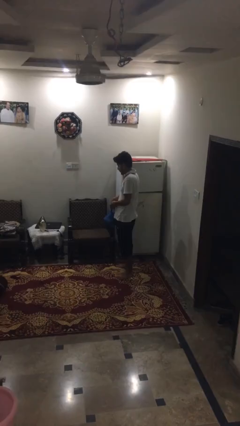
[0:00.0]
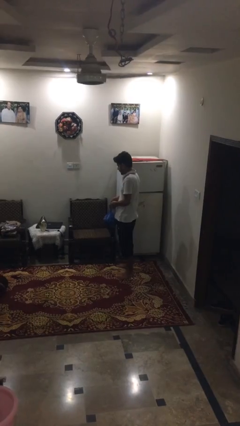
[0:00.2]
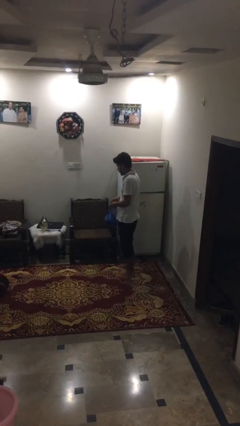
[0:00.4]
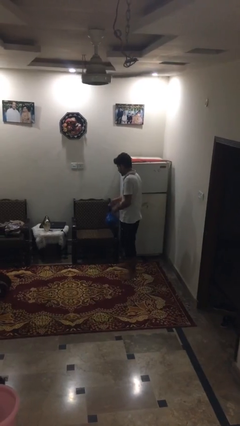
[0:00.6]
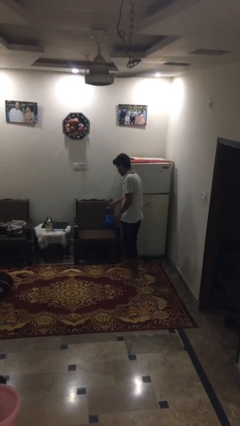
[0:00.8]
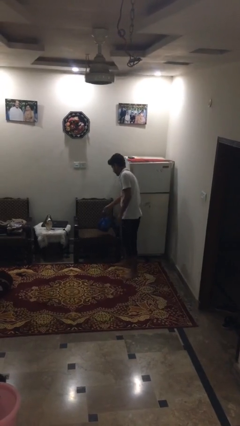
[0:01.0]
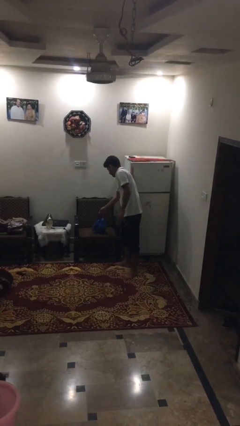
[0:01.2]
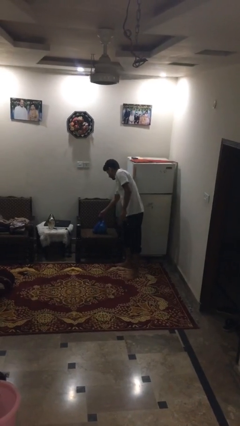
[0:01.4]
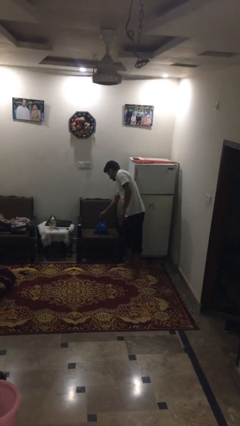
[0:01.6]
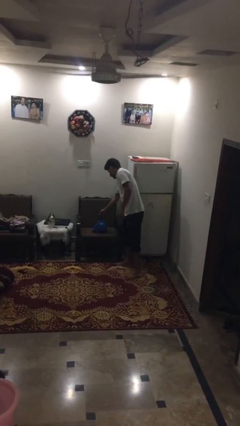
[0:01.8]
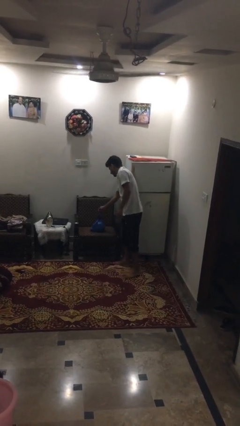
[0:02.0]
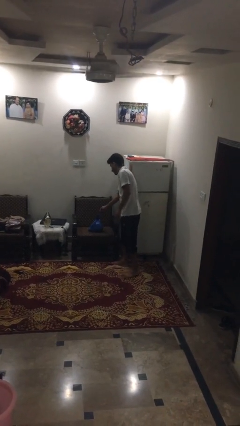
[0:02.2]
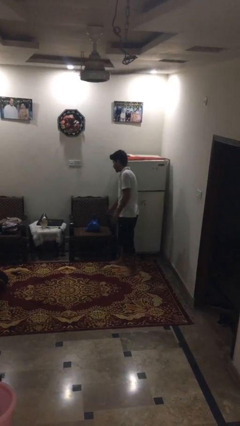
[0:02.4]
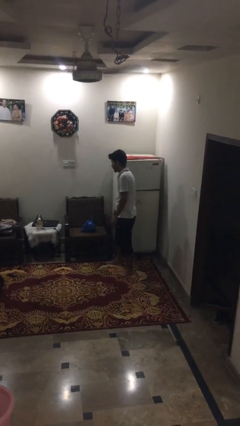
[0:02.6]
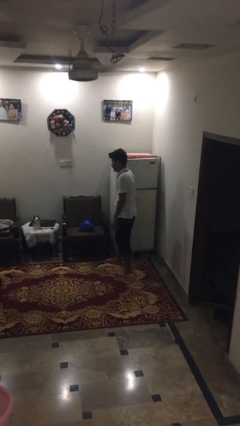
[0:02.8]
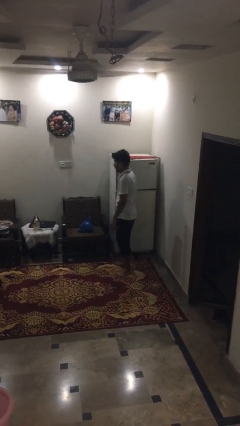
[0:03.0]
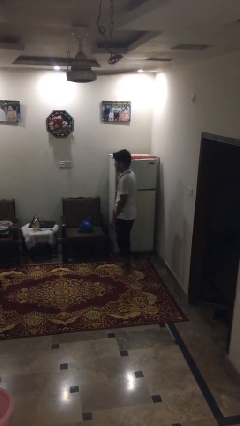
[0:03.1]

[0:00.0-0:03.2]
person puts down object on couch

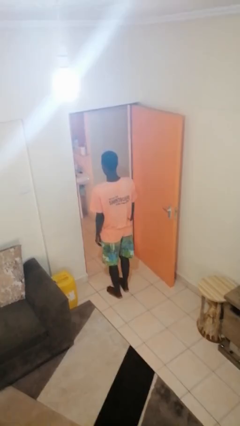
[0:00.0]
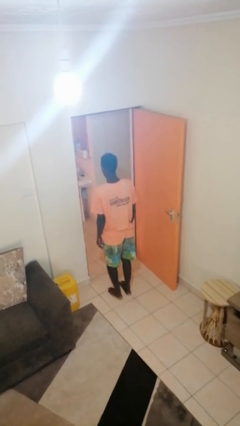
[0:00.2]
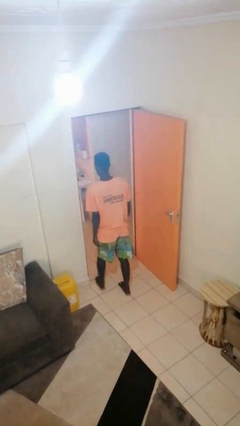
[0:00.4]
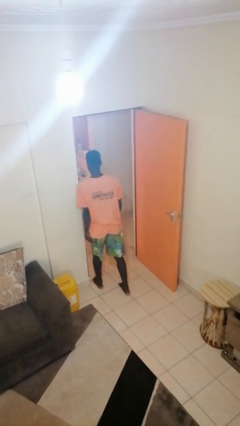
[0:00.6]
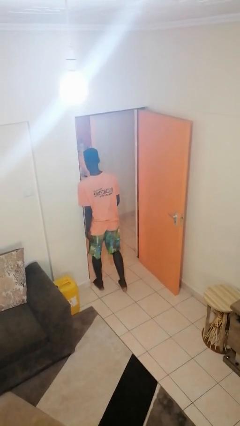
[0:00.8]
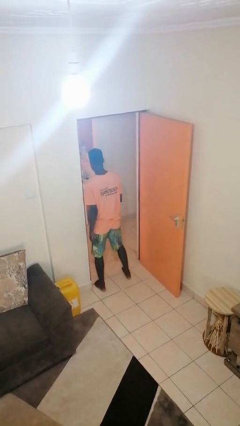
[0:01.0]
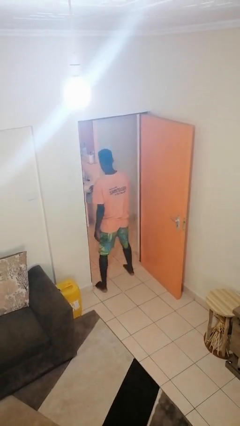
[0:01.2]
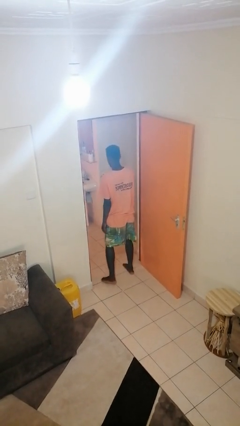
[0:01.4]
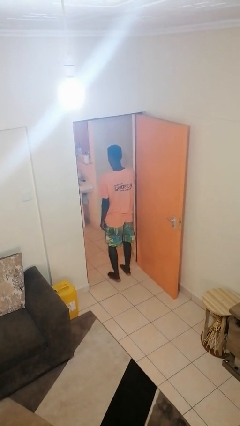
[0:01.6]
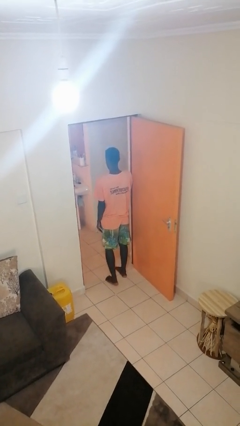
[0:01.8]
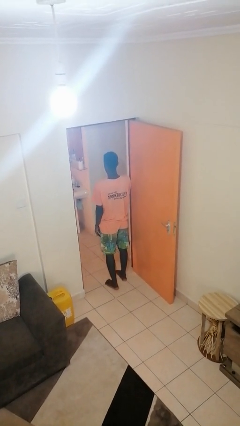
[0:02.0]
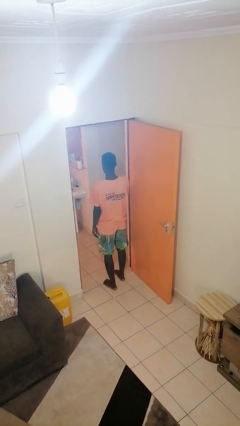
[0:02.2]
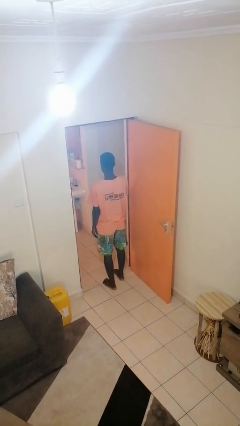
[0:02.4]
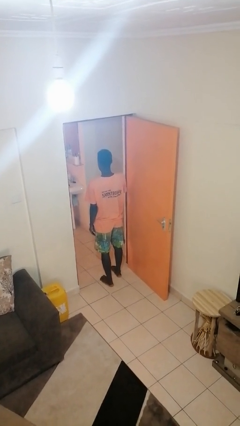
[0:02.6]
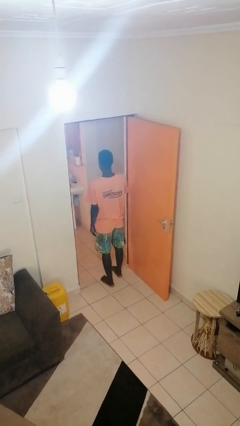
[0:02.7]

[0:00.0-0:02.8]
person bumps into wall

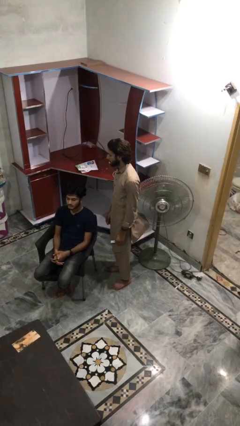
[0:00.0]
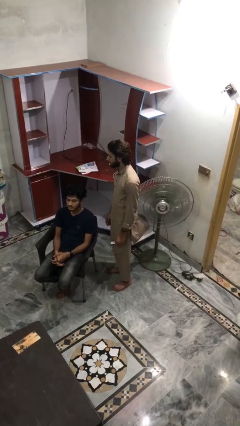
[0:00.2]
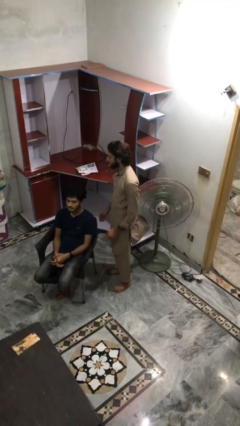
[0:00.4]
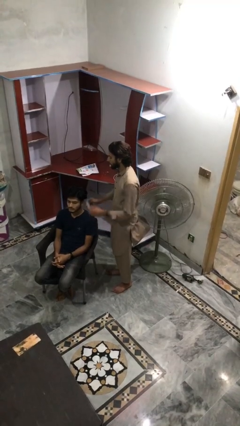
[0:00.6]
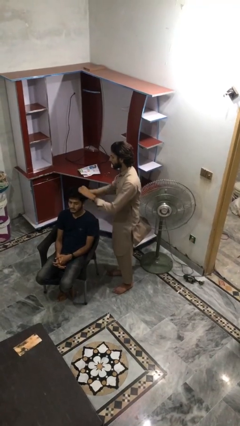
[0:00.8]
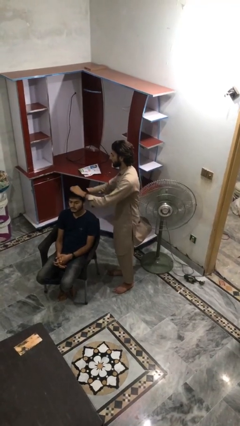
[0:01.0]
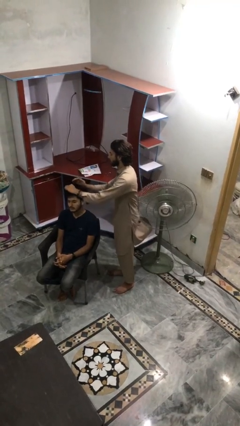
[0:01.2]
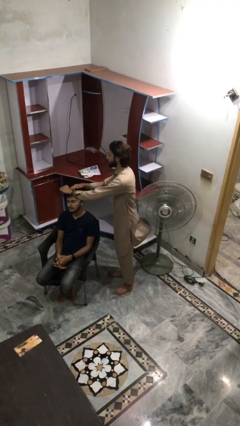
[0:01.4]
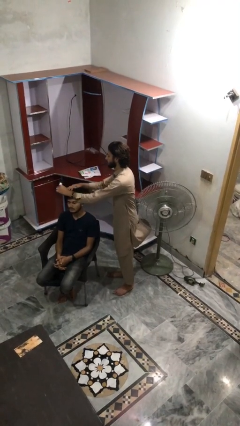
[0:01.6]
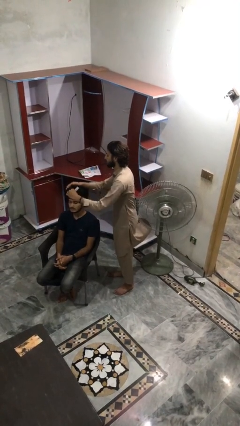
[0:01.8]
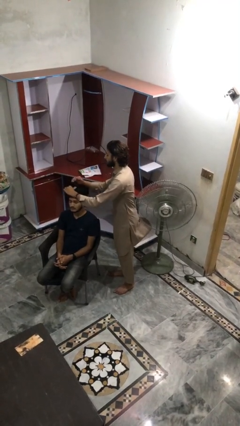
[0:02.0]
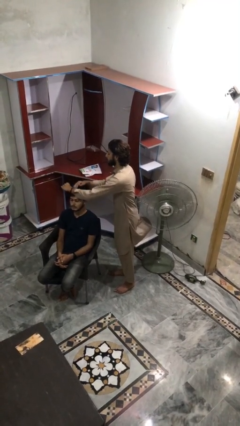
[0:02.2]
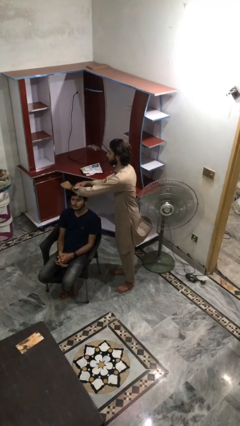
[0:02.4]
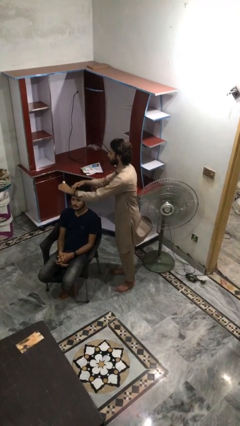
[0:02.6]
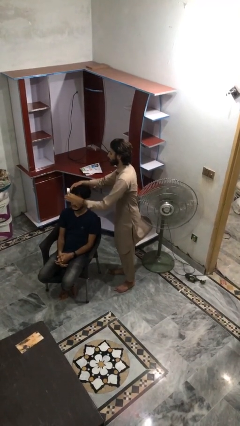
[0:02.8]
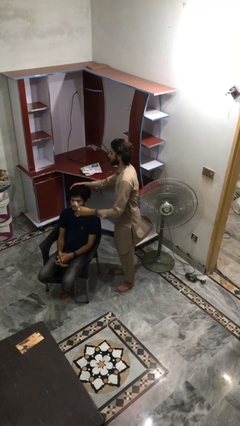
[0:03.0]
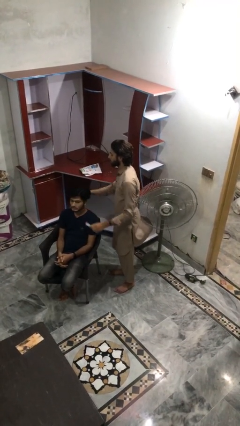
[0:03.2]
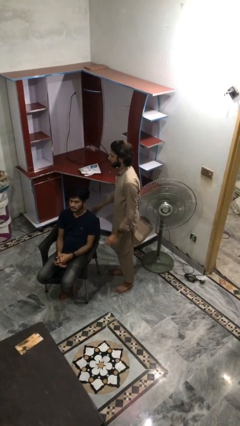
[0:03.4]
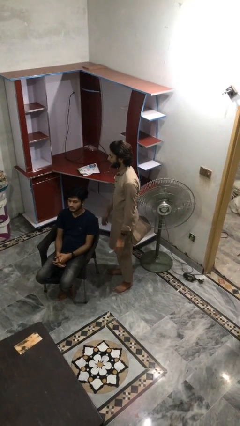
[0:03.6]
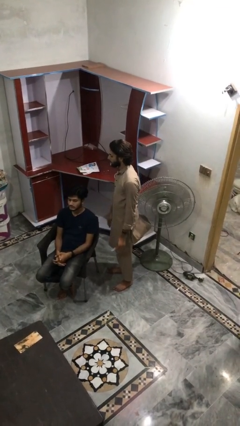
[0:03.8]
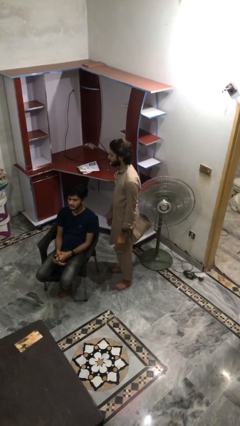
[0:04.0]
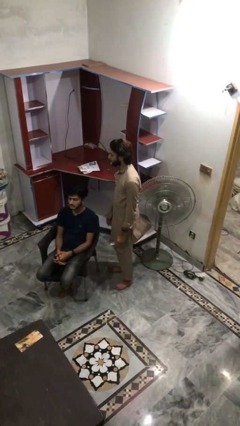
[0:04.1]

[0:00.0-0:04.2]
person brushes hair of person

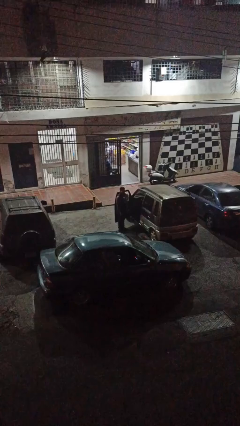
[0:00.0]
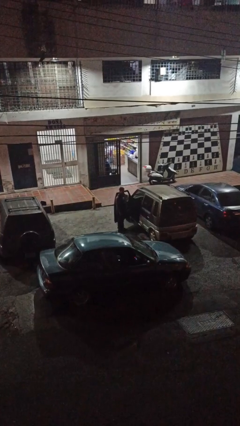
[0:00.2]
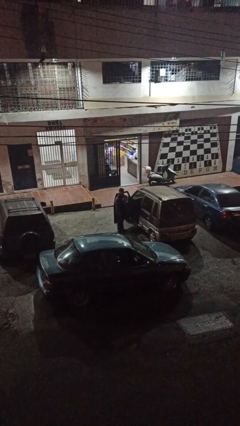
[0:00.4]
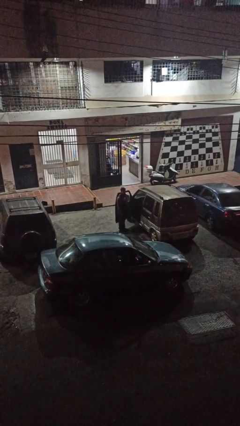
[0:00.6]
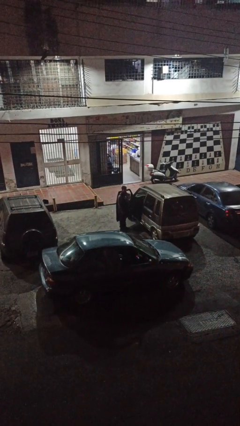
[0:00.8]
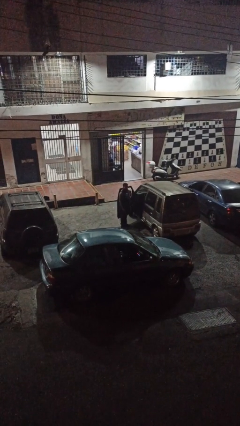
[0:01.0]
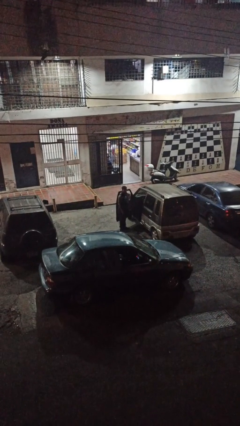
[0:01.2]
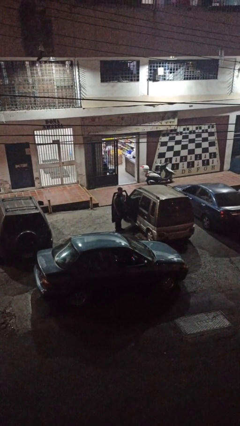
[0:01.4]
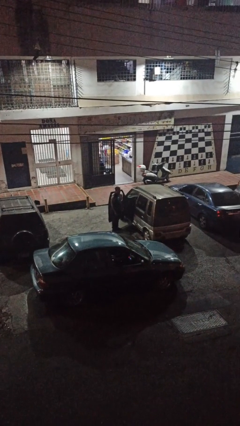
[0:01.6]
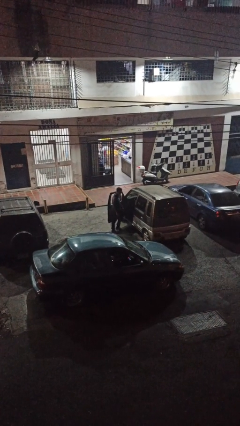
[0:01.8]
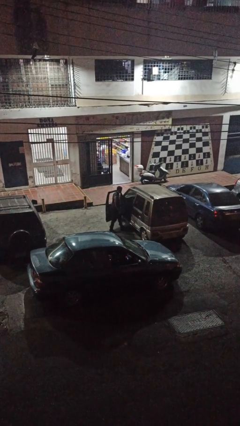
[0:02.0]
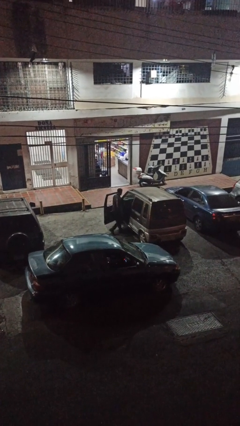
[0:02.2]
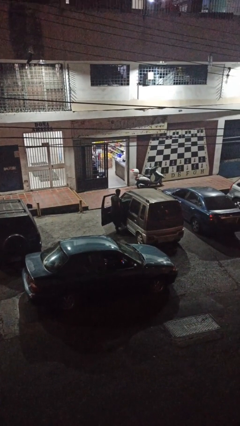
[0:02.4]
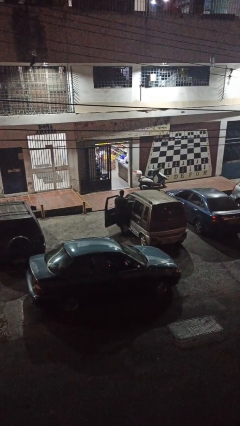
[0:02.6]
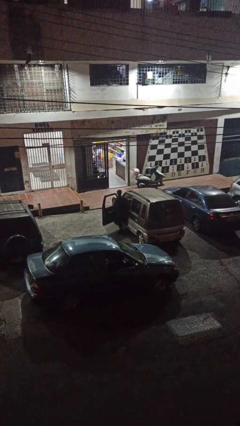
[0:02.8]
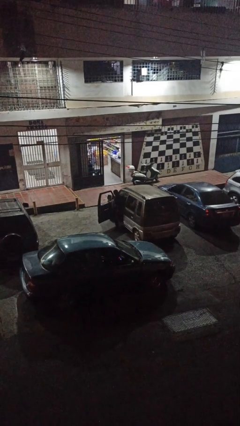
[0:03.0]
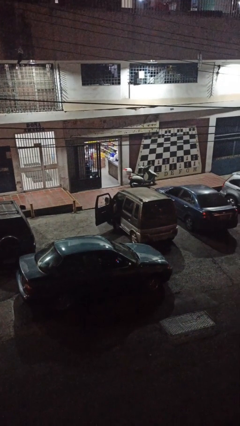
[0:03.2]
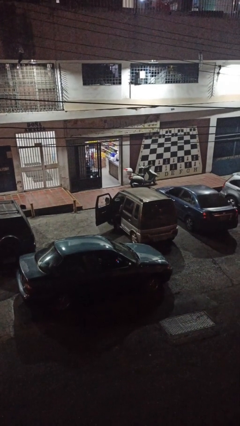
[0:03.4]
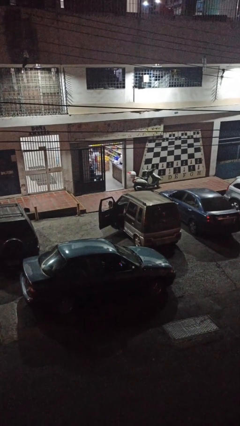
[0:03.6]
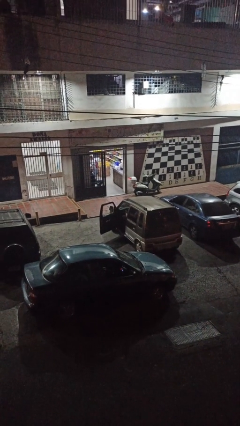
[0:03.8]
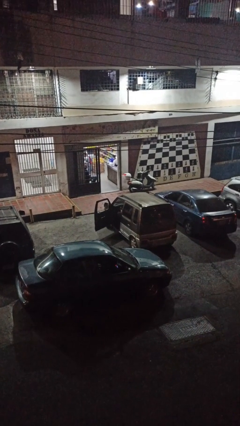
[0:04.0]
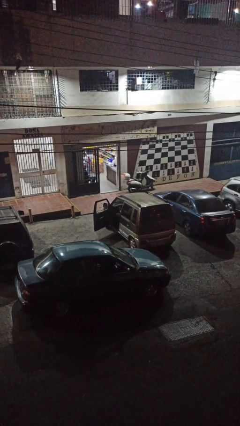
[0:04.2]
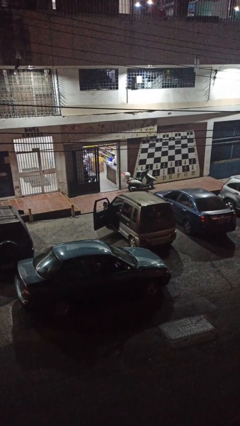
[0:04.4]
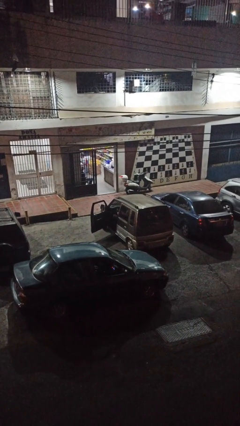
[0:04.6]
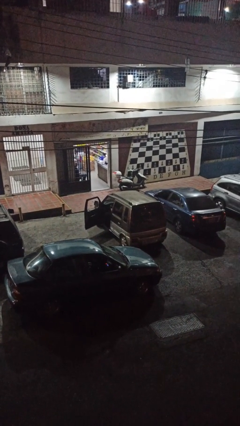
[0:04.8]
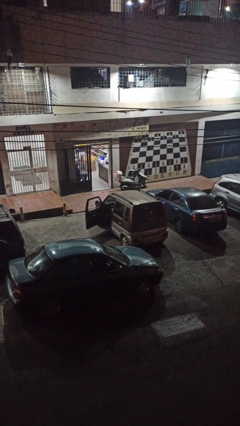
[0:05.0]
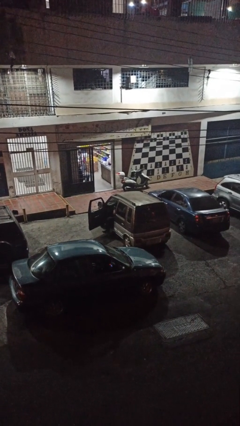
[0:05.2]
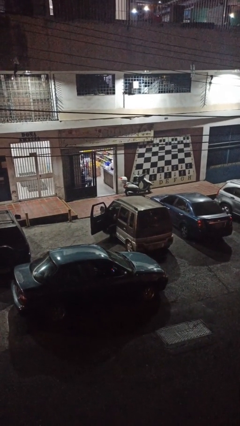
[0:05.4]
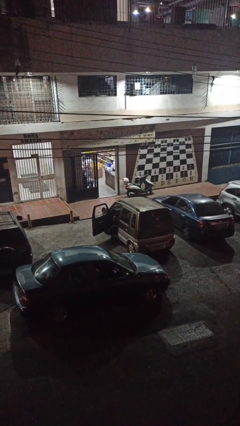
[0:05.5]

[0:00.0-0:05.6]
person enters car

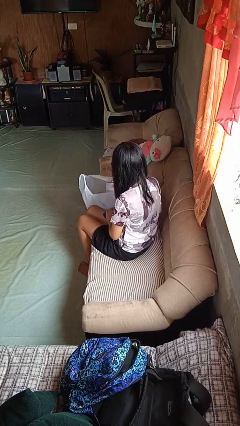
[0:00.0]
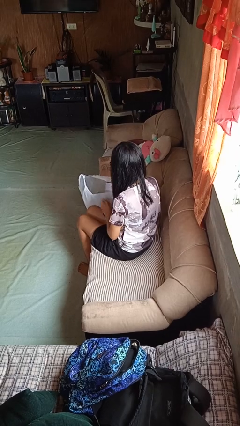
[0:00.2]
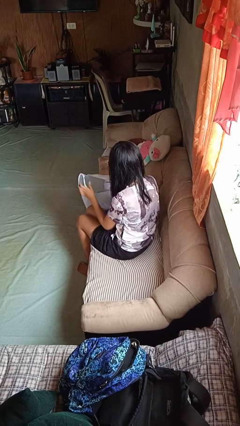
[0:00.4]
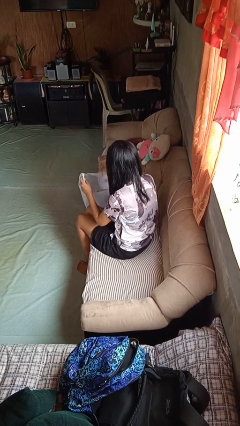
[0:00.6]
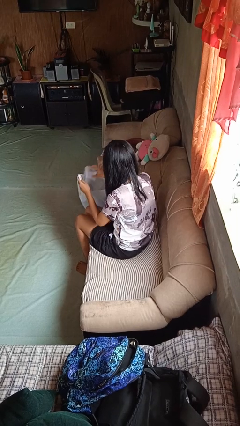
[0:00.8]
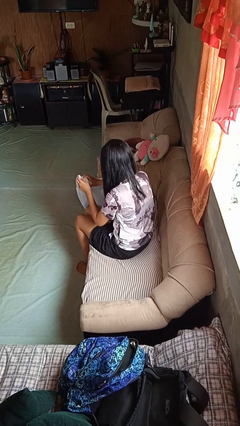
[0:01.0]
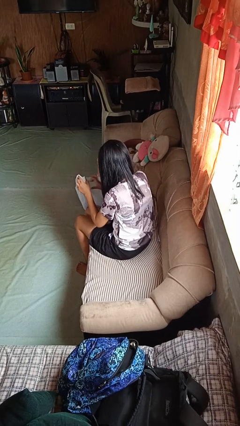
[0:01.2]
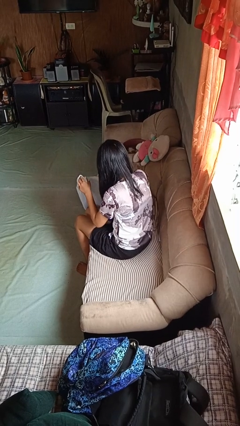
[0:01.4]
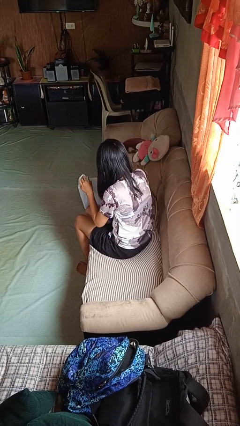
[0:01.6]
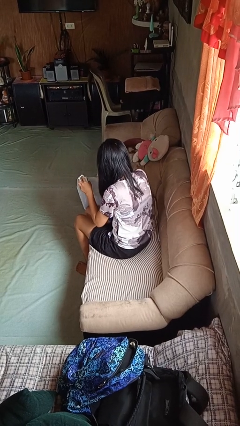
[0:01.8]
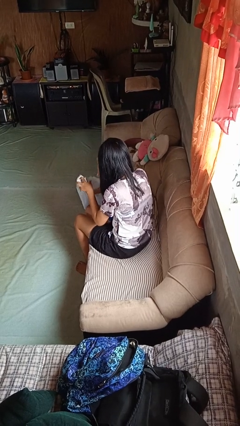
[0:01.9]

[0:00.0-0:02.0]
person searches in bag
